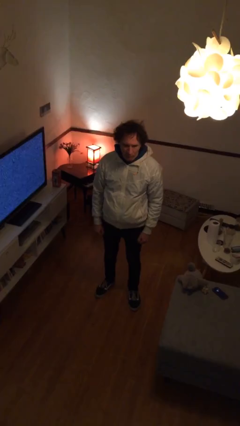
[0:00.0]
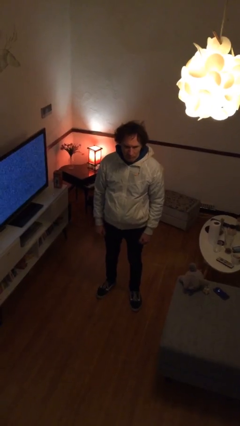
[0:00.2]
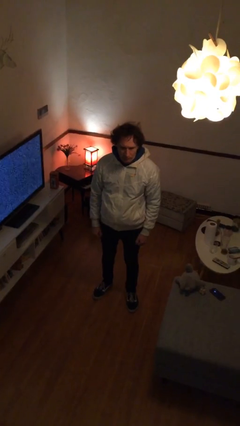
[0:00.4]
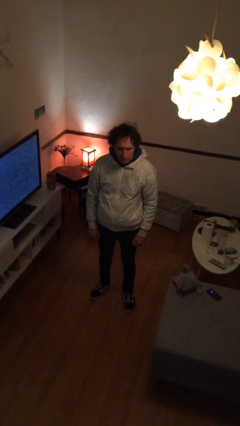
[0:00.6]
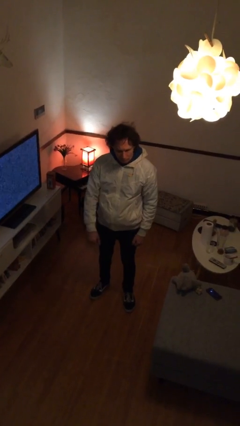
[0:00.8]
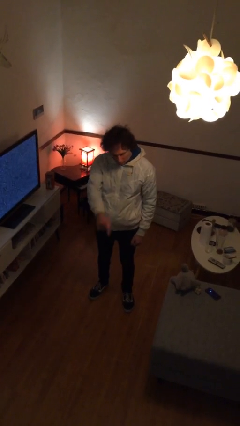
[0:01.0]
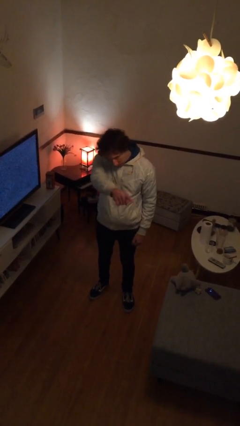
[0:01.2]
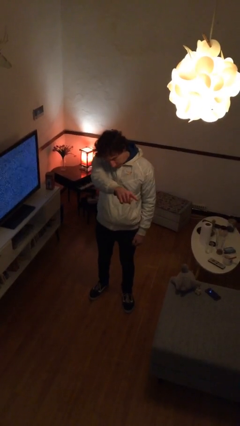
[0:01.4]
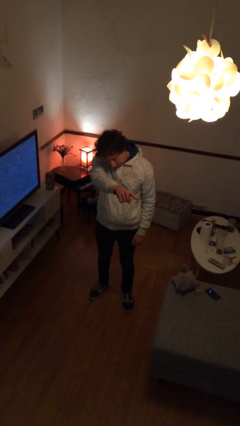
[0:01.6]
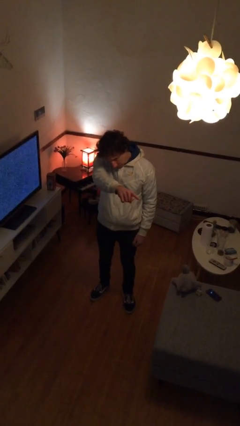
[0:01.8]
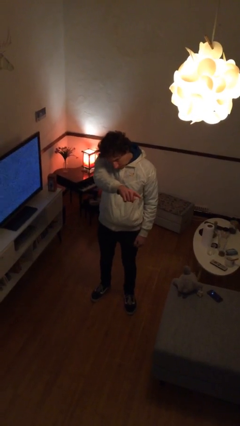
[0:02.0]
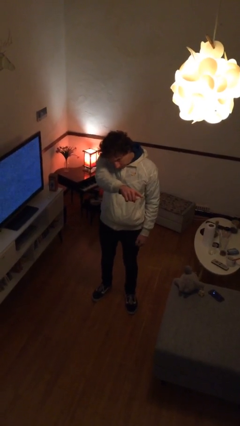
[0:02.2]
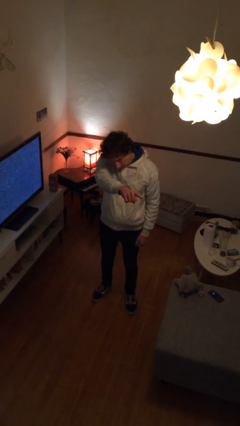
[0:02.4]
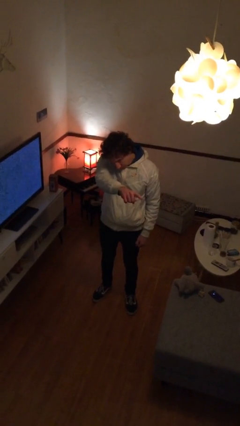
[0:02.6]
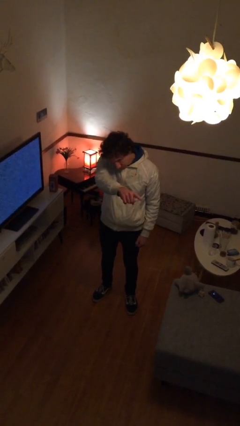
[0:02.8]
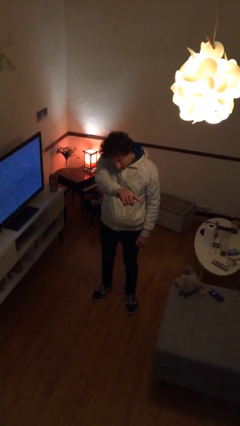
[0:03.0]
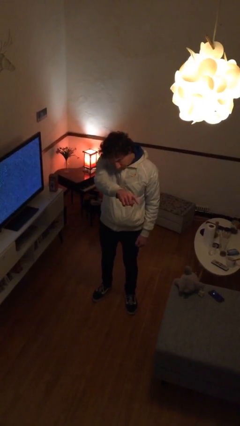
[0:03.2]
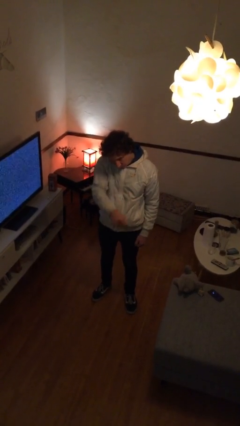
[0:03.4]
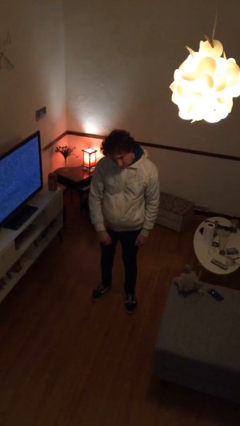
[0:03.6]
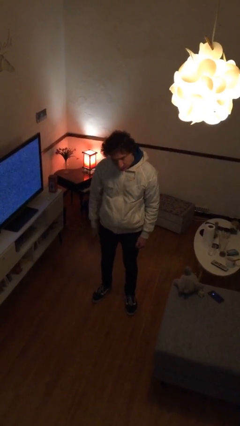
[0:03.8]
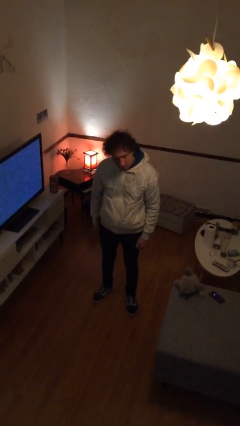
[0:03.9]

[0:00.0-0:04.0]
person points at person

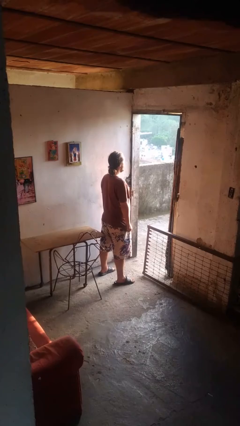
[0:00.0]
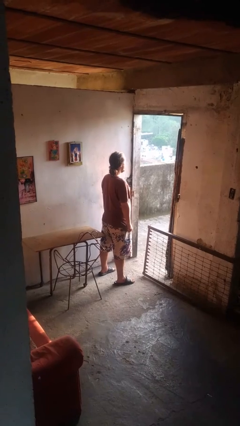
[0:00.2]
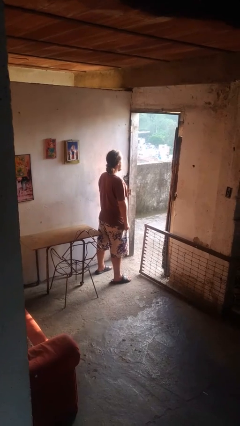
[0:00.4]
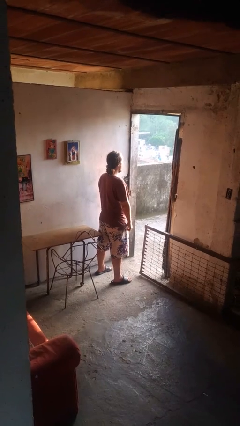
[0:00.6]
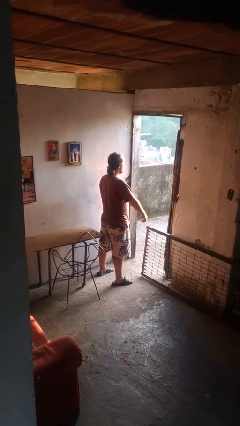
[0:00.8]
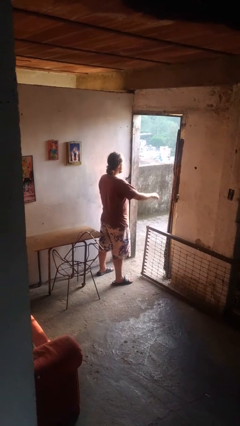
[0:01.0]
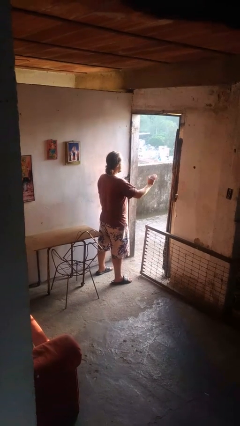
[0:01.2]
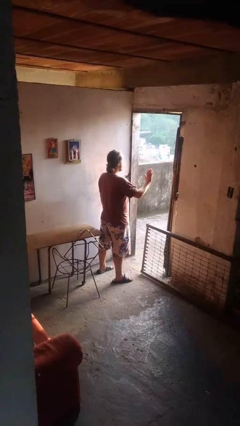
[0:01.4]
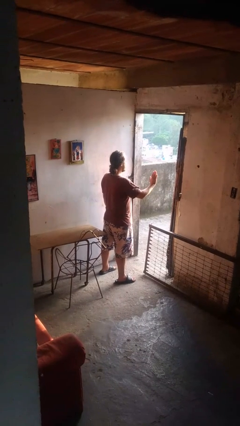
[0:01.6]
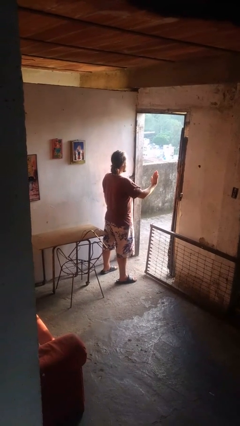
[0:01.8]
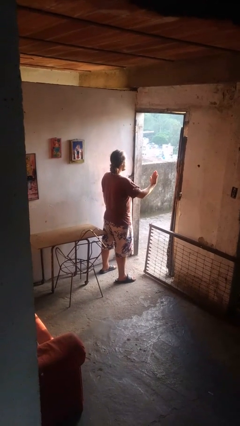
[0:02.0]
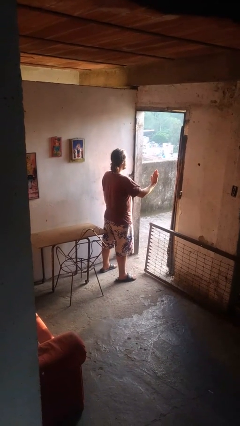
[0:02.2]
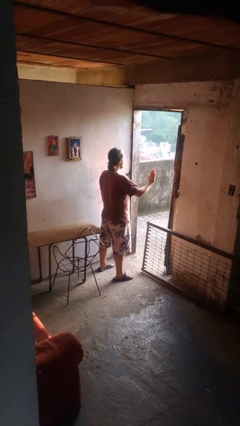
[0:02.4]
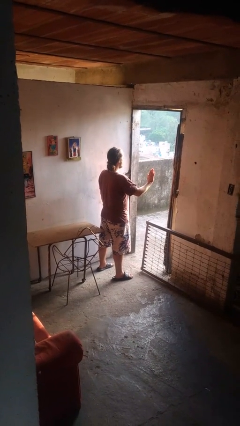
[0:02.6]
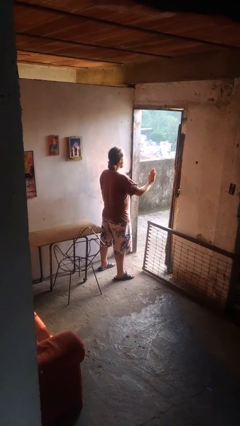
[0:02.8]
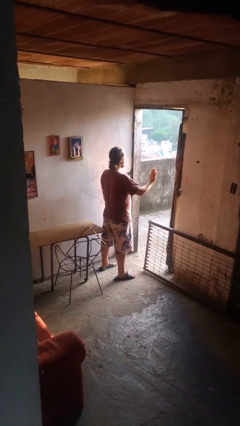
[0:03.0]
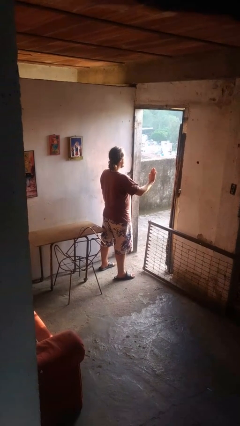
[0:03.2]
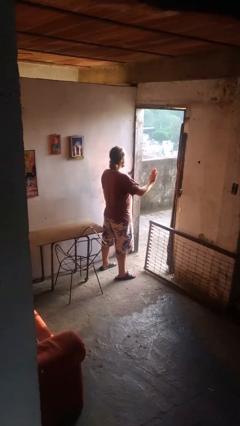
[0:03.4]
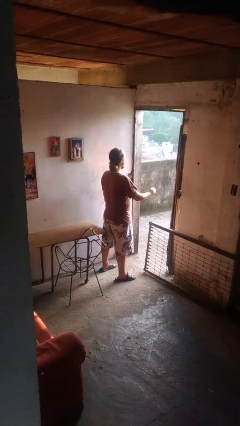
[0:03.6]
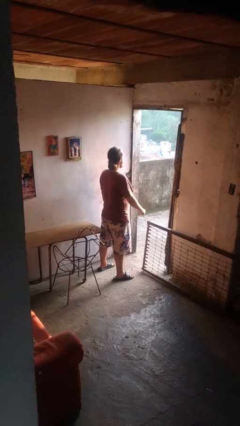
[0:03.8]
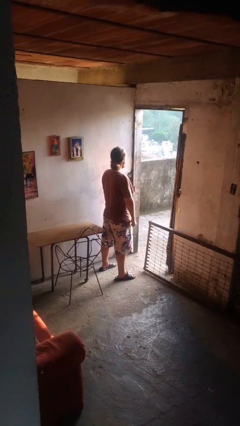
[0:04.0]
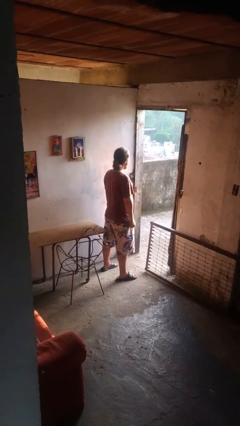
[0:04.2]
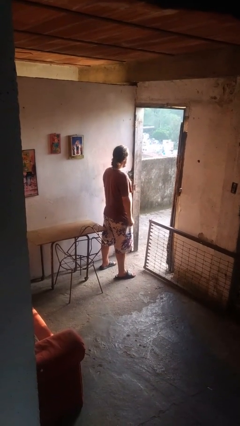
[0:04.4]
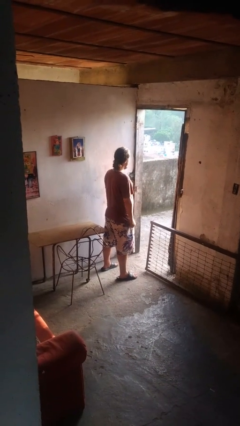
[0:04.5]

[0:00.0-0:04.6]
person gestures stop

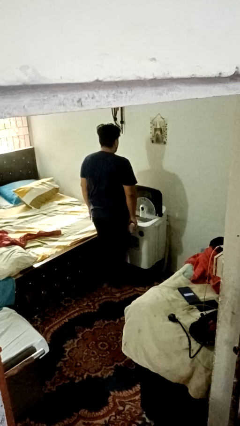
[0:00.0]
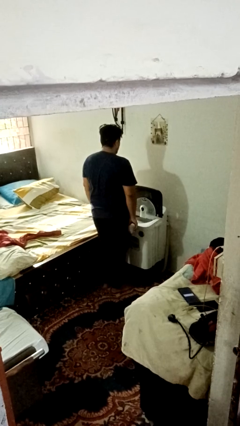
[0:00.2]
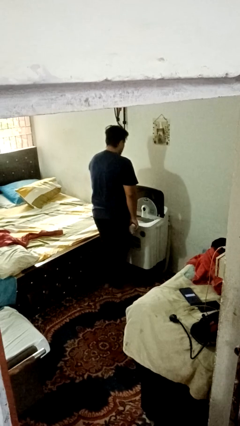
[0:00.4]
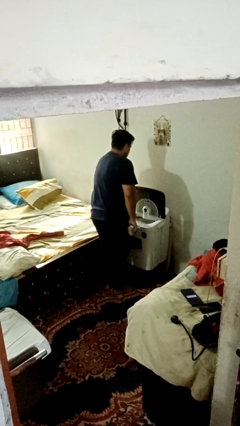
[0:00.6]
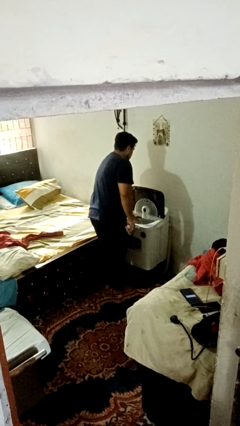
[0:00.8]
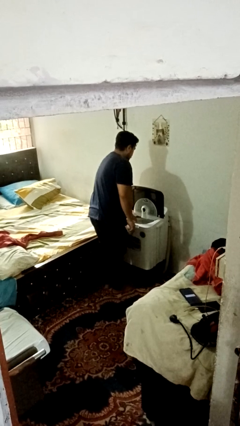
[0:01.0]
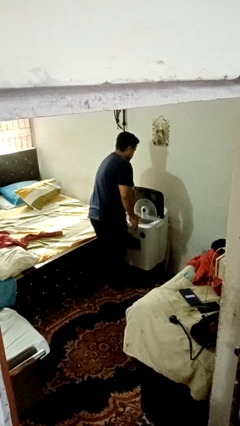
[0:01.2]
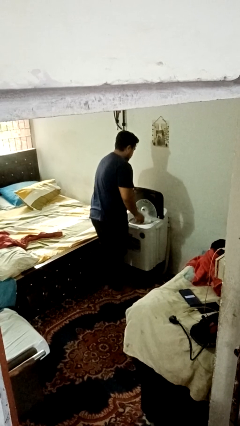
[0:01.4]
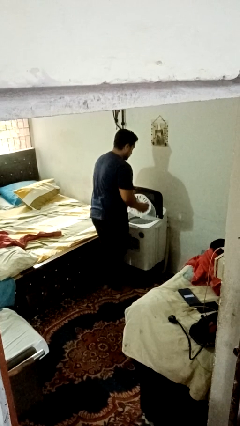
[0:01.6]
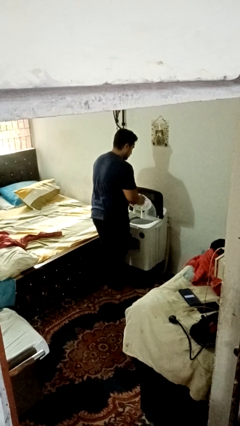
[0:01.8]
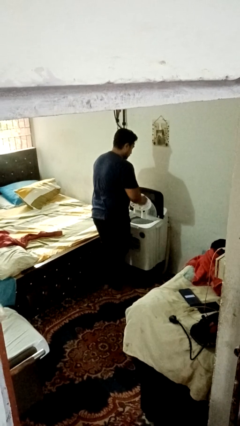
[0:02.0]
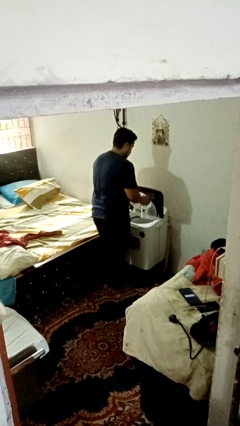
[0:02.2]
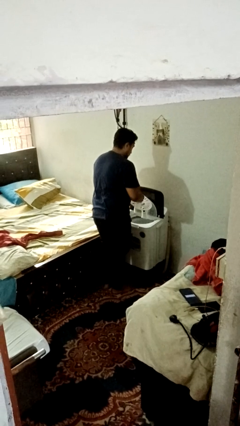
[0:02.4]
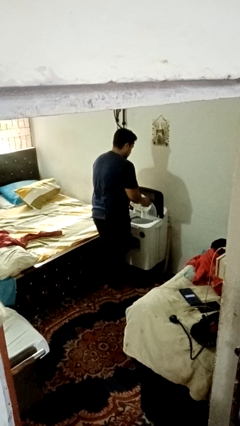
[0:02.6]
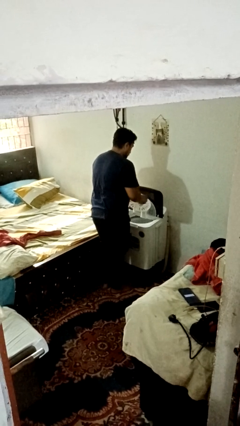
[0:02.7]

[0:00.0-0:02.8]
person cleans dryer lint trap

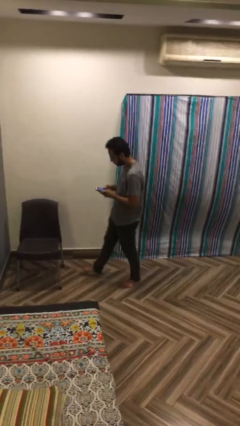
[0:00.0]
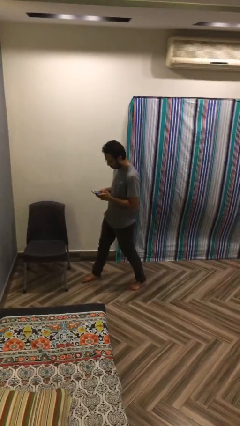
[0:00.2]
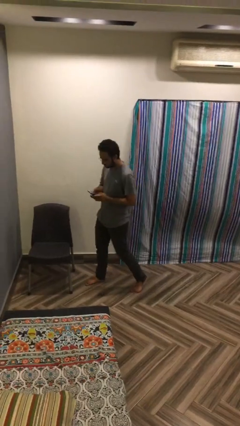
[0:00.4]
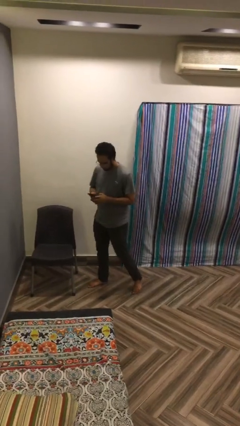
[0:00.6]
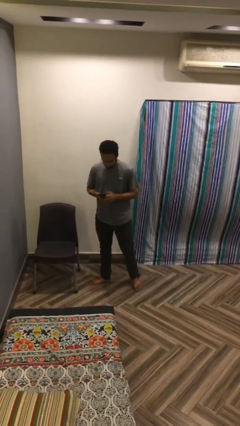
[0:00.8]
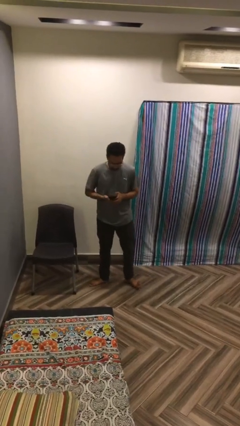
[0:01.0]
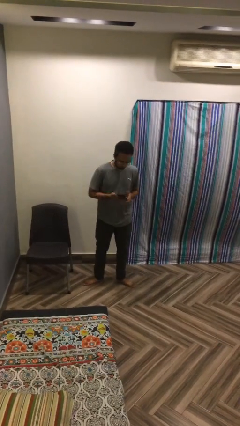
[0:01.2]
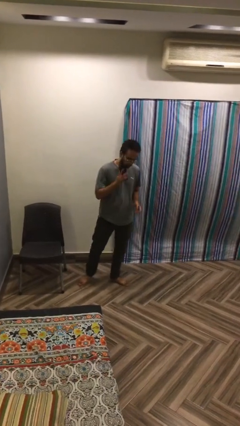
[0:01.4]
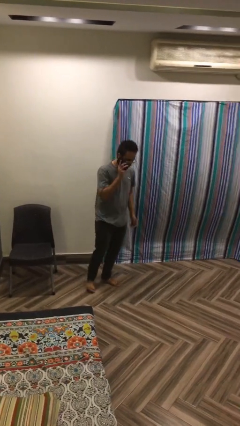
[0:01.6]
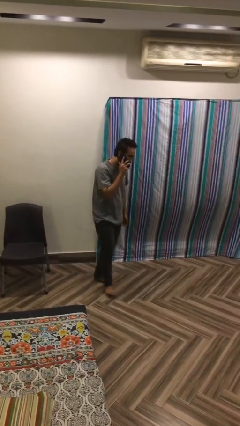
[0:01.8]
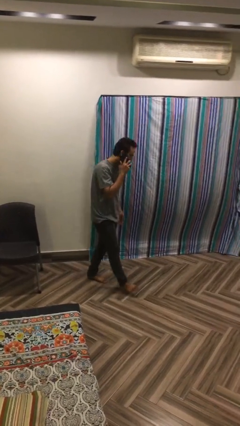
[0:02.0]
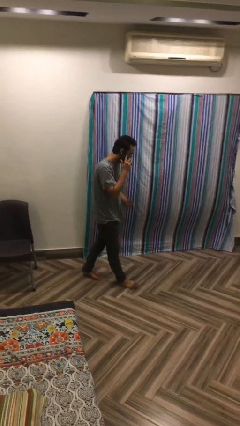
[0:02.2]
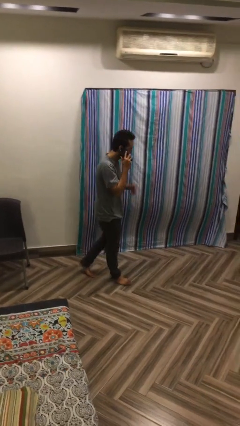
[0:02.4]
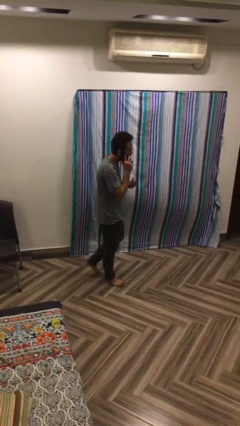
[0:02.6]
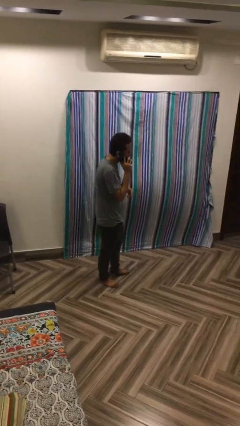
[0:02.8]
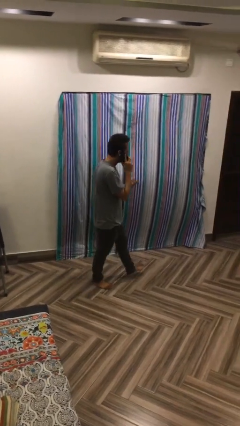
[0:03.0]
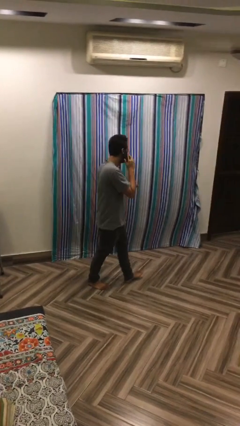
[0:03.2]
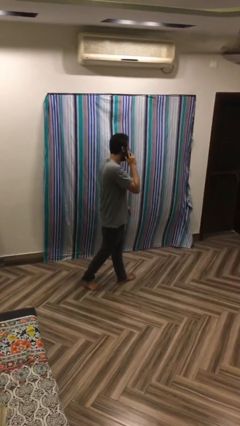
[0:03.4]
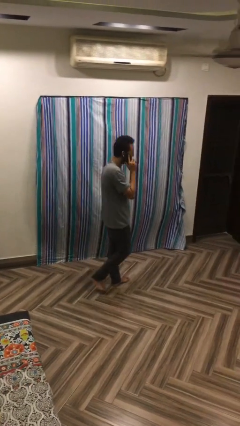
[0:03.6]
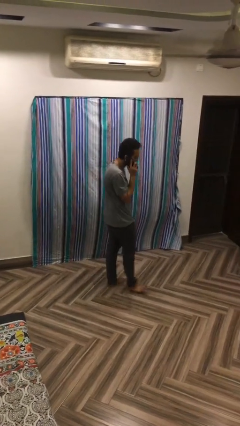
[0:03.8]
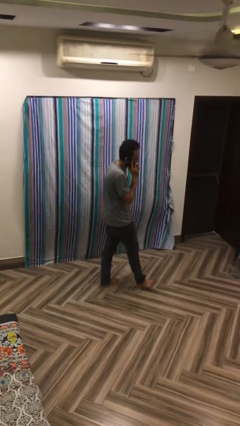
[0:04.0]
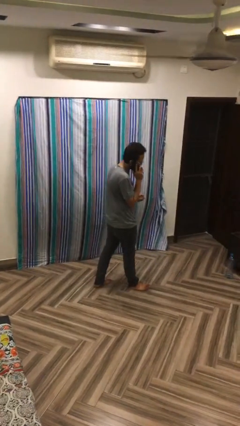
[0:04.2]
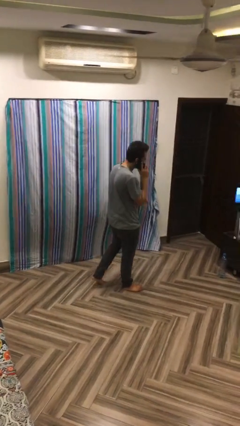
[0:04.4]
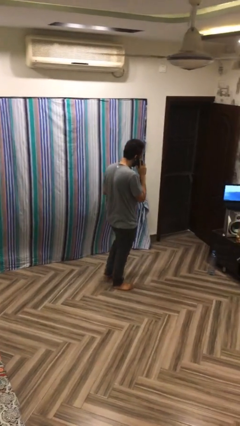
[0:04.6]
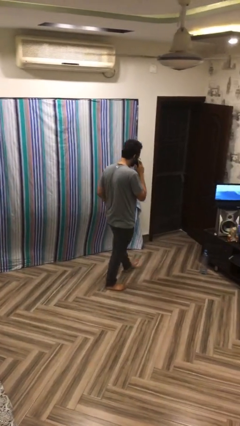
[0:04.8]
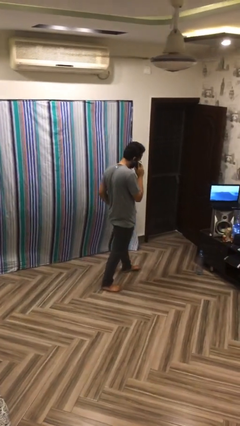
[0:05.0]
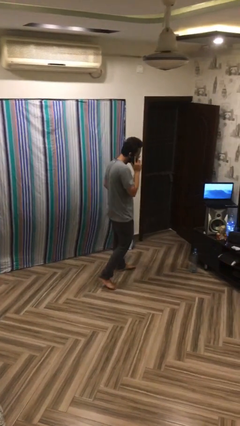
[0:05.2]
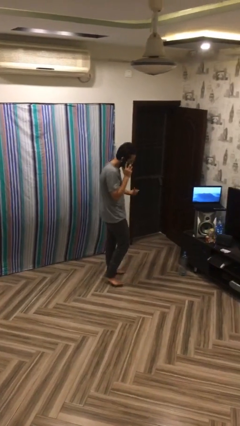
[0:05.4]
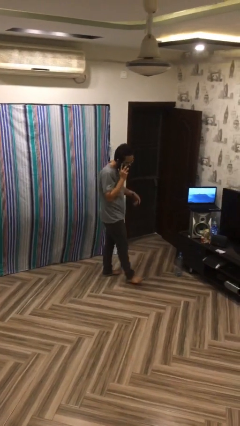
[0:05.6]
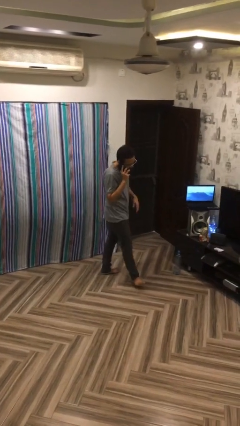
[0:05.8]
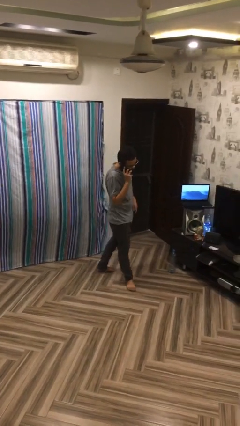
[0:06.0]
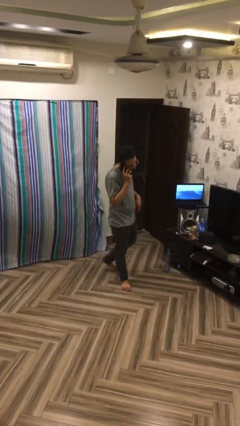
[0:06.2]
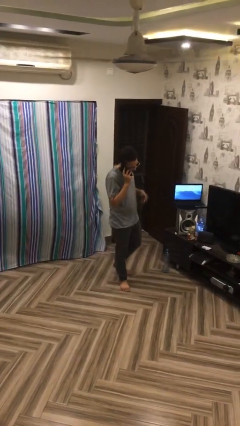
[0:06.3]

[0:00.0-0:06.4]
person talks on phone

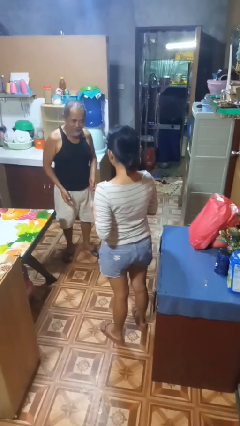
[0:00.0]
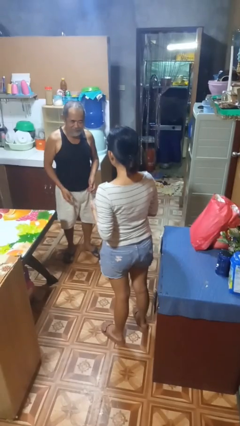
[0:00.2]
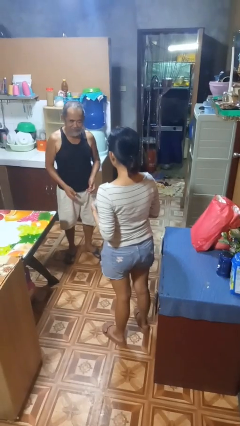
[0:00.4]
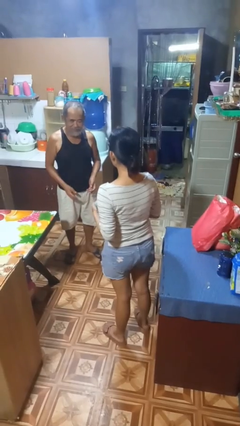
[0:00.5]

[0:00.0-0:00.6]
person throws object to person
